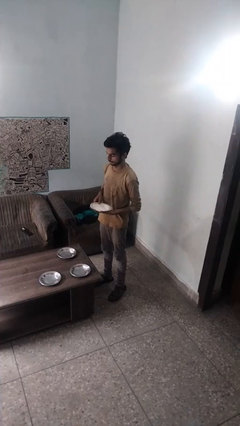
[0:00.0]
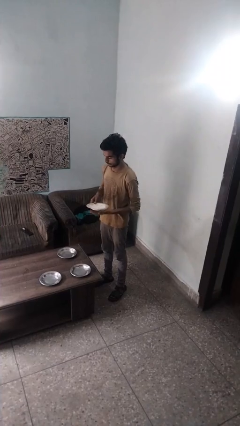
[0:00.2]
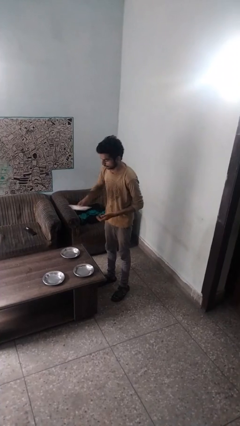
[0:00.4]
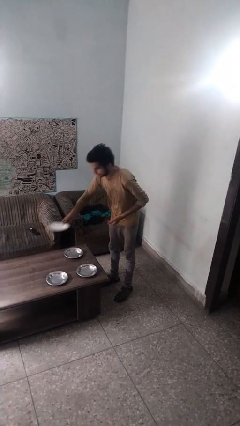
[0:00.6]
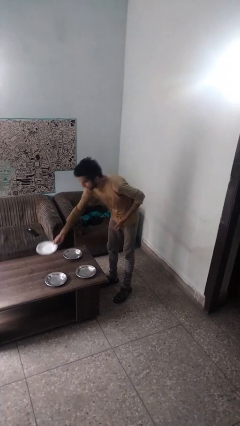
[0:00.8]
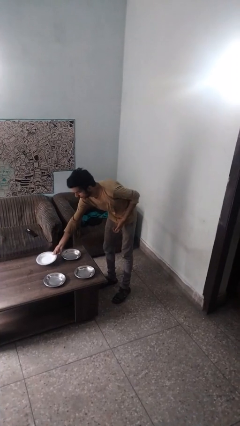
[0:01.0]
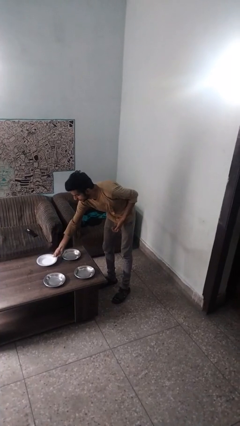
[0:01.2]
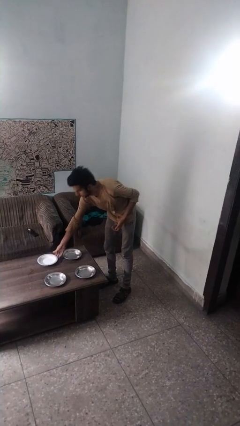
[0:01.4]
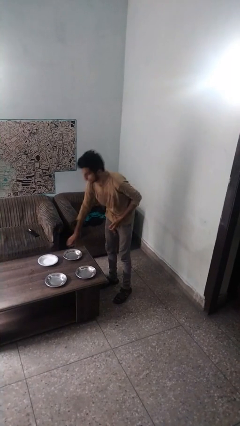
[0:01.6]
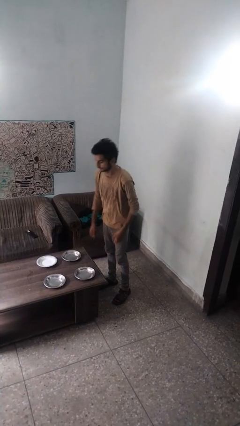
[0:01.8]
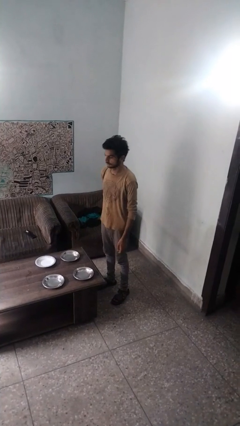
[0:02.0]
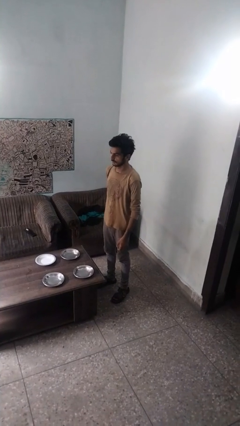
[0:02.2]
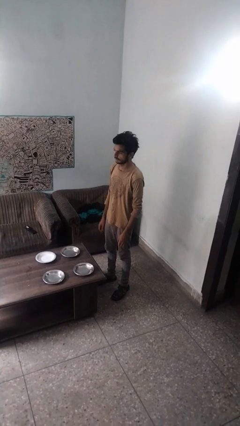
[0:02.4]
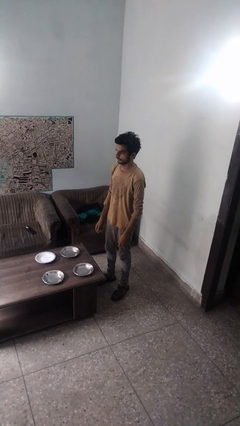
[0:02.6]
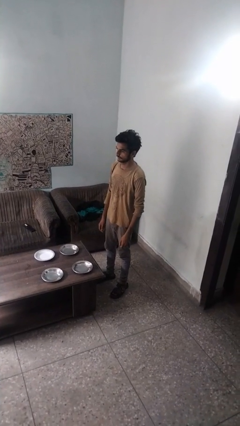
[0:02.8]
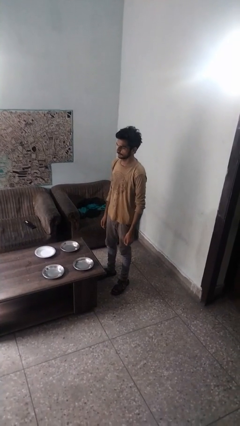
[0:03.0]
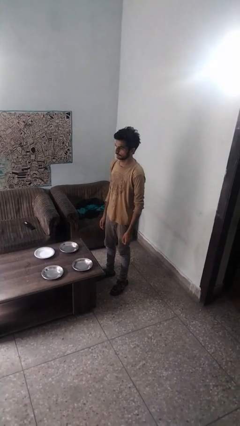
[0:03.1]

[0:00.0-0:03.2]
person sets table

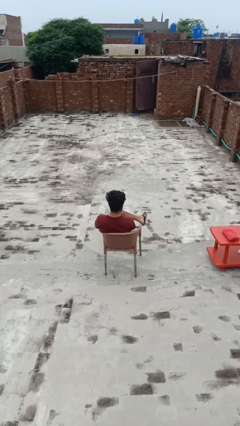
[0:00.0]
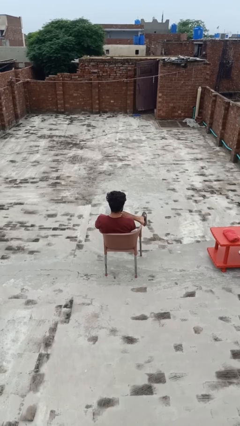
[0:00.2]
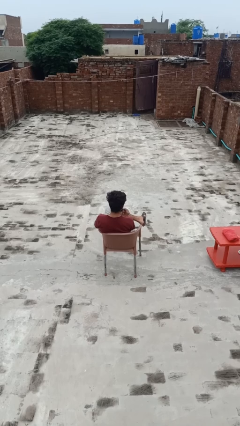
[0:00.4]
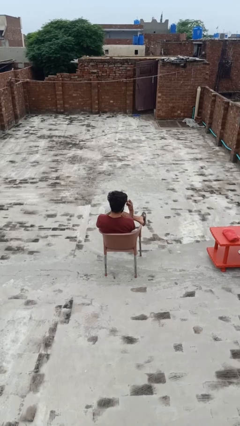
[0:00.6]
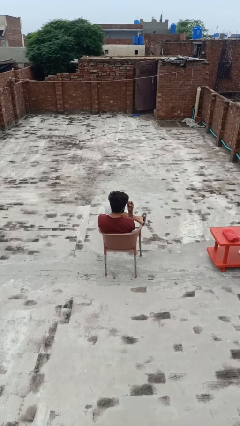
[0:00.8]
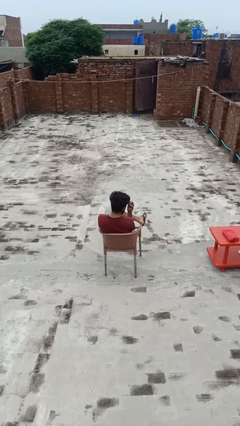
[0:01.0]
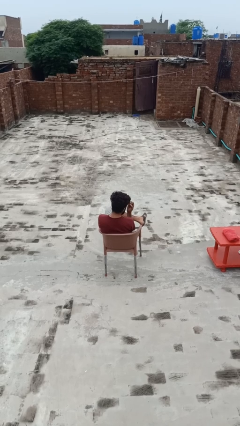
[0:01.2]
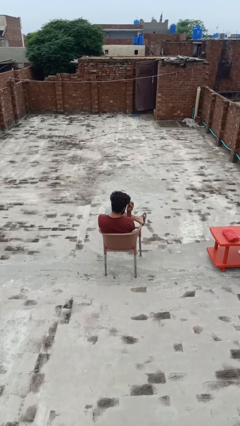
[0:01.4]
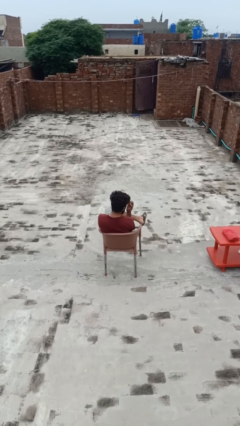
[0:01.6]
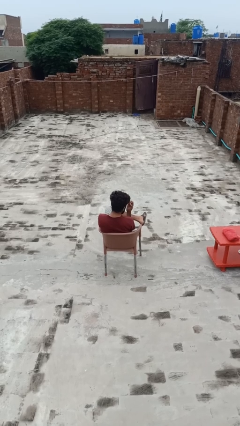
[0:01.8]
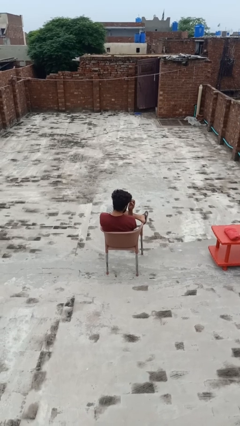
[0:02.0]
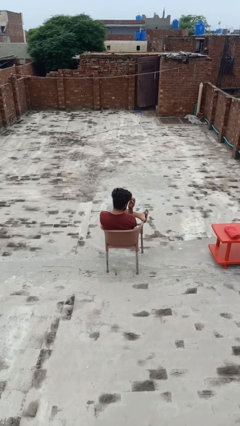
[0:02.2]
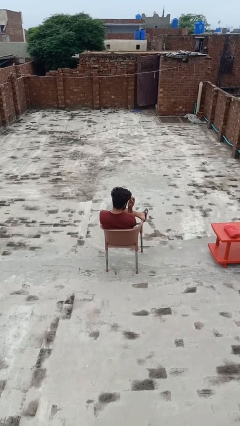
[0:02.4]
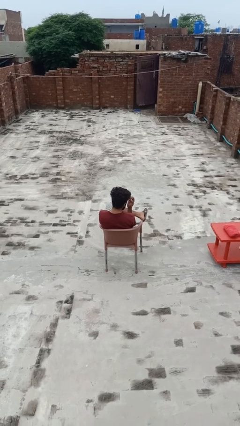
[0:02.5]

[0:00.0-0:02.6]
person paints fingernails

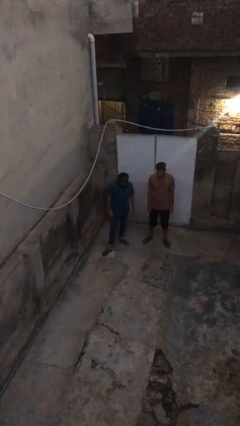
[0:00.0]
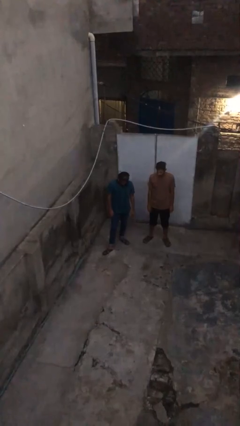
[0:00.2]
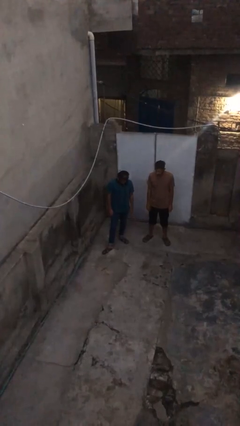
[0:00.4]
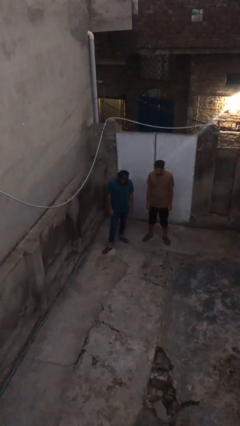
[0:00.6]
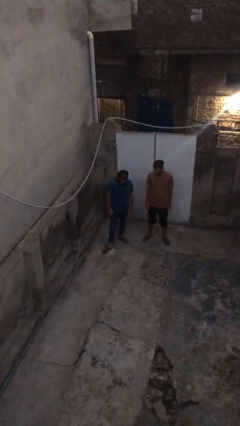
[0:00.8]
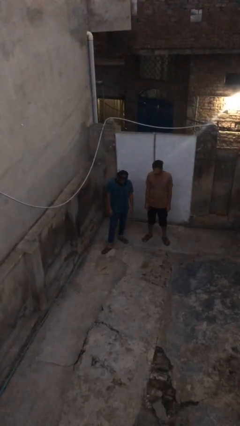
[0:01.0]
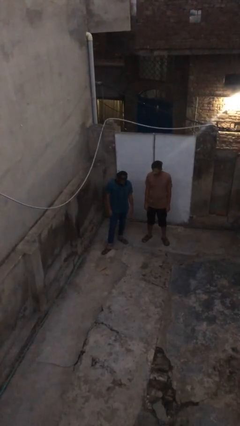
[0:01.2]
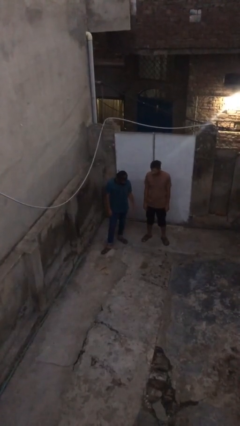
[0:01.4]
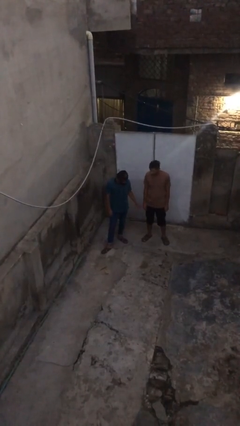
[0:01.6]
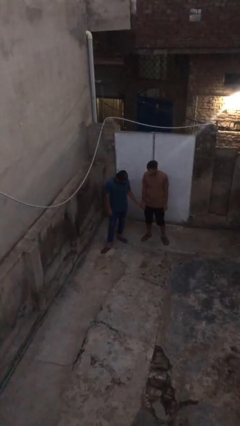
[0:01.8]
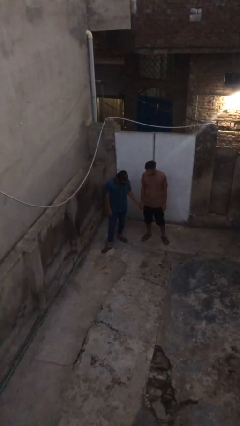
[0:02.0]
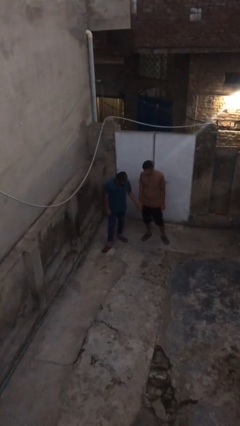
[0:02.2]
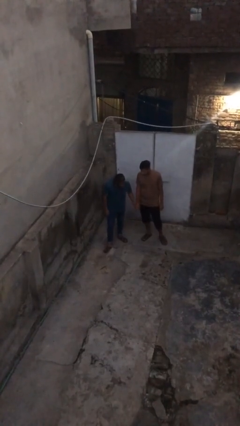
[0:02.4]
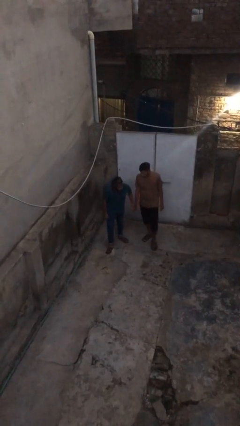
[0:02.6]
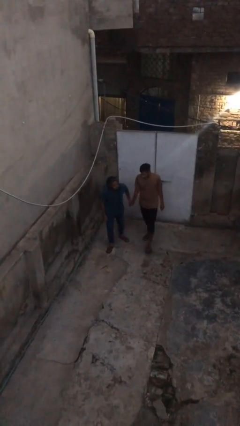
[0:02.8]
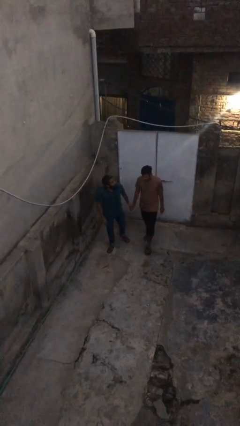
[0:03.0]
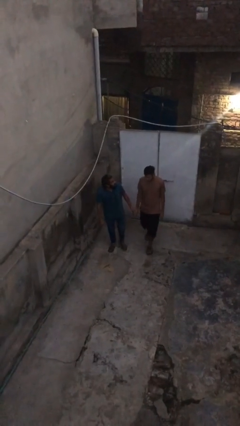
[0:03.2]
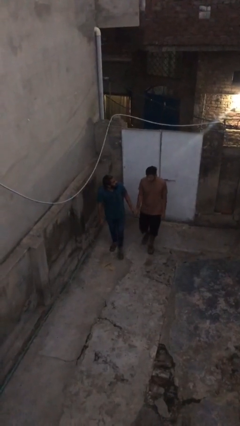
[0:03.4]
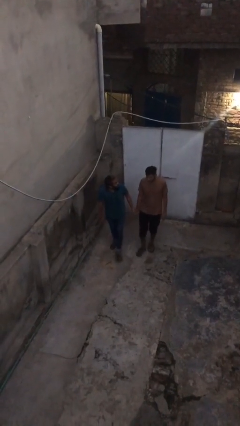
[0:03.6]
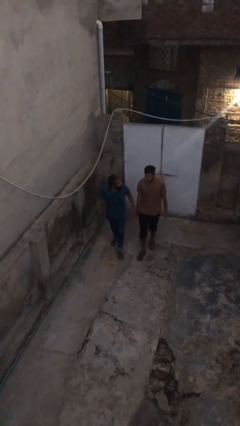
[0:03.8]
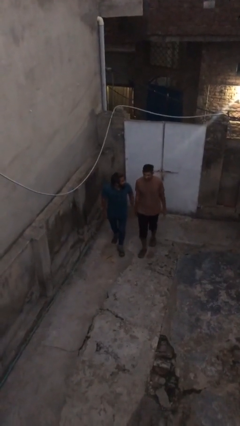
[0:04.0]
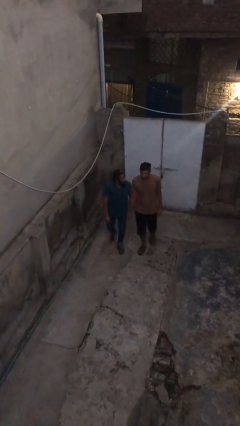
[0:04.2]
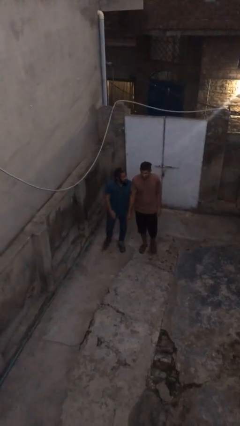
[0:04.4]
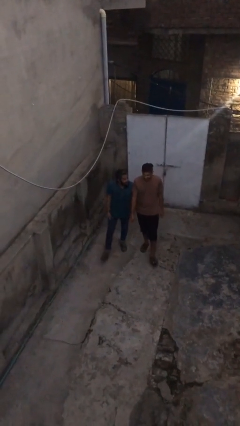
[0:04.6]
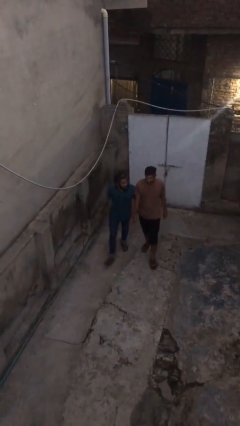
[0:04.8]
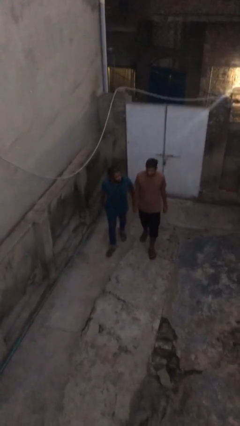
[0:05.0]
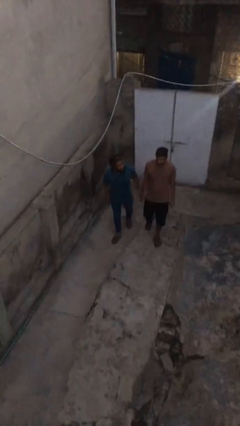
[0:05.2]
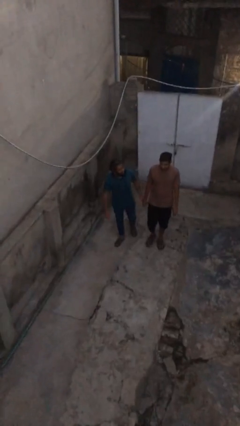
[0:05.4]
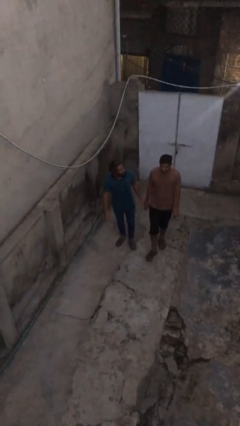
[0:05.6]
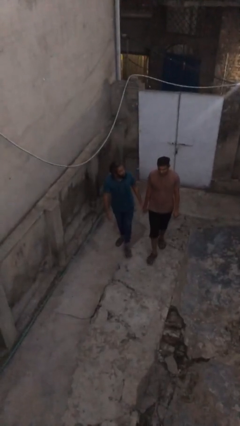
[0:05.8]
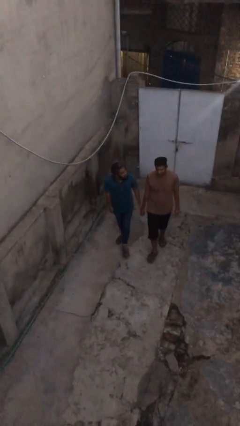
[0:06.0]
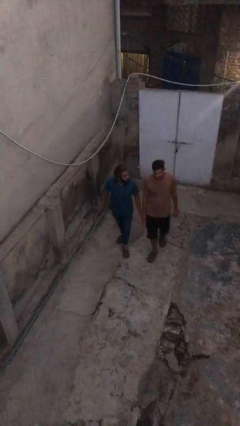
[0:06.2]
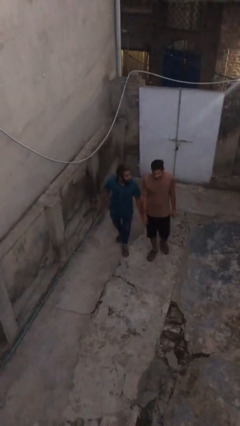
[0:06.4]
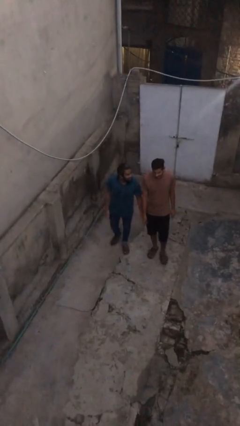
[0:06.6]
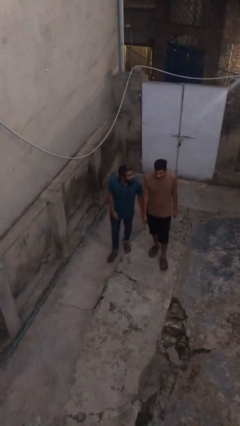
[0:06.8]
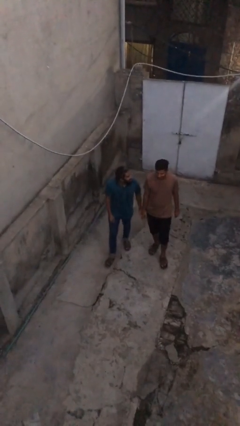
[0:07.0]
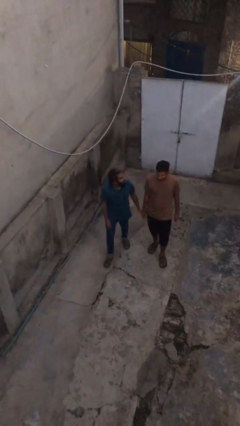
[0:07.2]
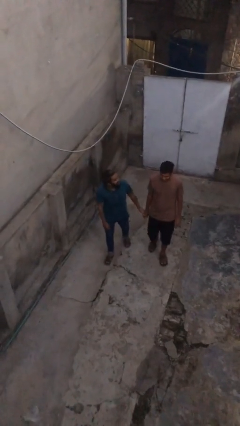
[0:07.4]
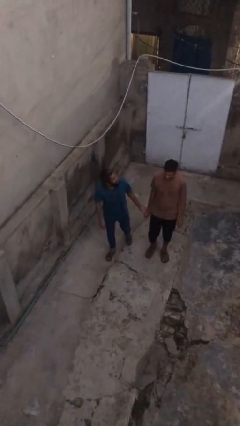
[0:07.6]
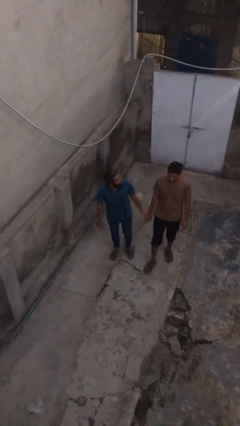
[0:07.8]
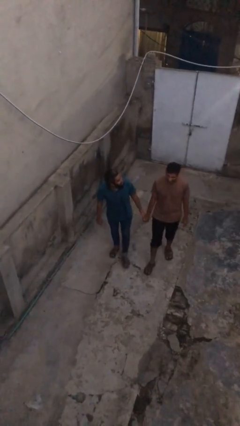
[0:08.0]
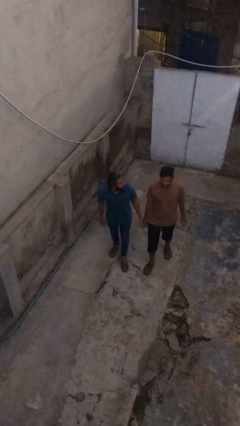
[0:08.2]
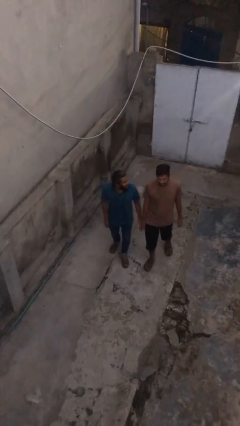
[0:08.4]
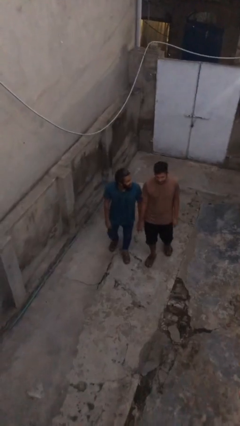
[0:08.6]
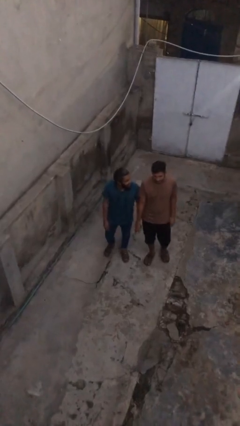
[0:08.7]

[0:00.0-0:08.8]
person holds hand

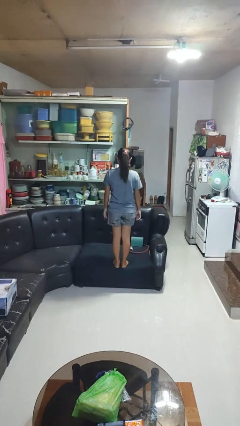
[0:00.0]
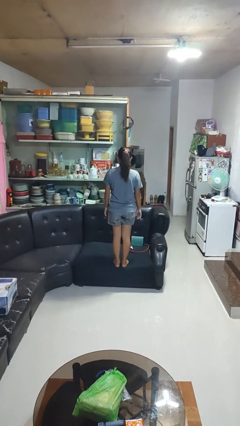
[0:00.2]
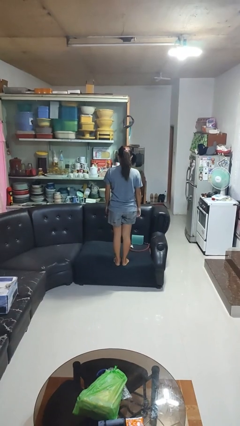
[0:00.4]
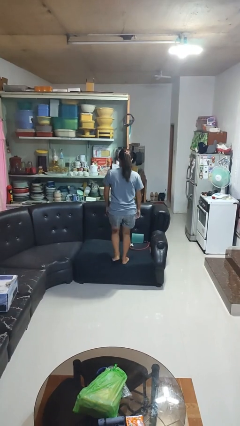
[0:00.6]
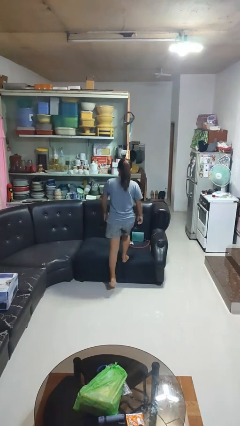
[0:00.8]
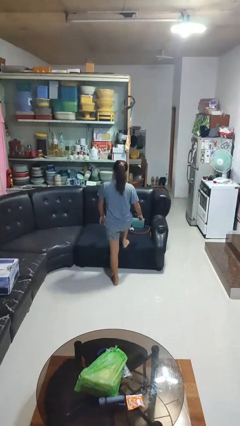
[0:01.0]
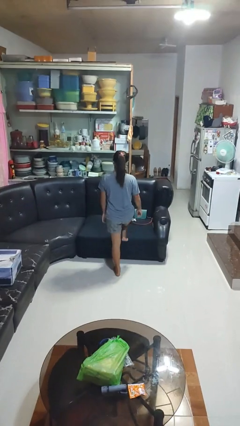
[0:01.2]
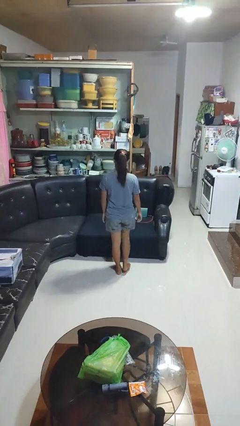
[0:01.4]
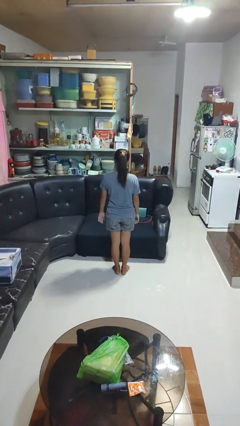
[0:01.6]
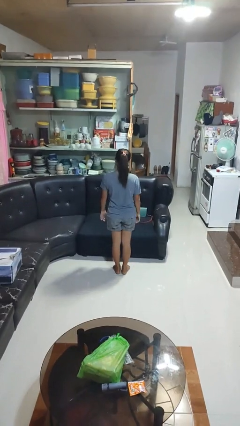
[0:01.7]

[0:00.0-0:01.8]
person climbs off couch

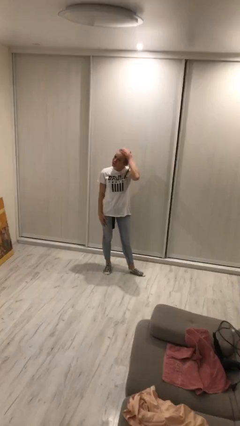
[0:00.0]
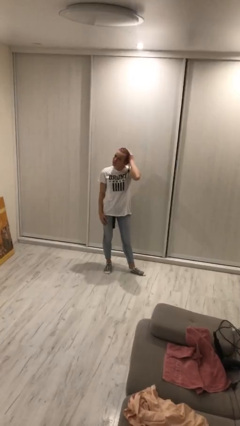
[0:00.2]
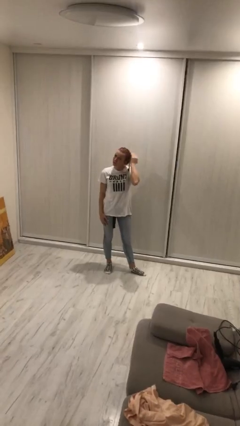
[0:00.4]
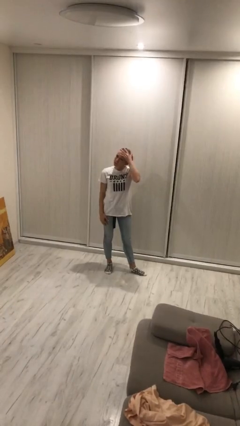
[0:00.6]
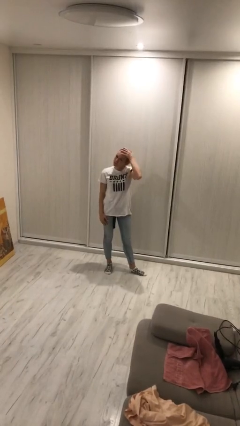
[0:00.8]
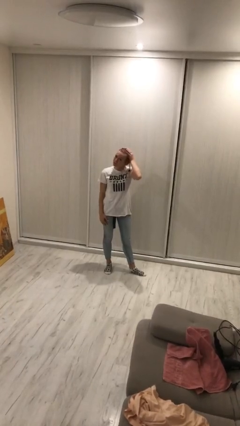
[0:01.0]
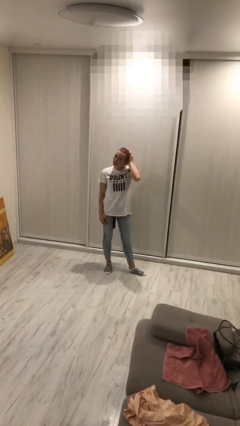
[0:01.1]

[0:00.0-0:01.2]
person pats head
